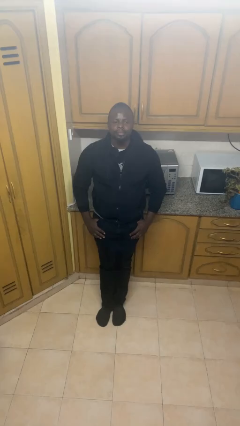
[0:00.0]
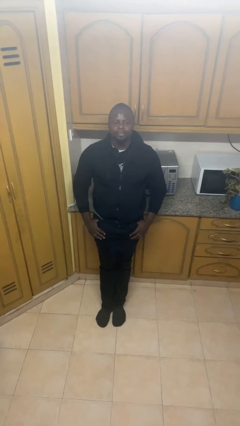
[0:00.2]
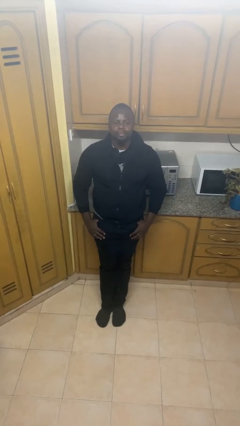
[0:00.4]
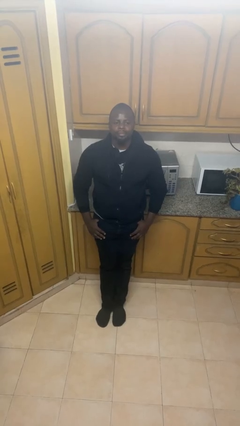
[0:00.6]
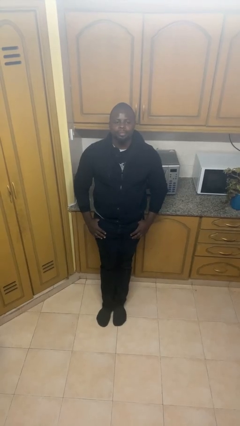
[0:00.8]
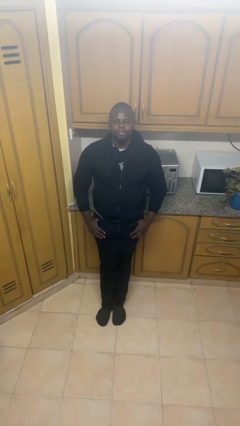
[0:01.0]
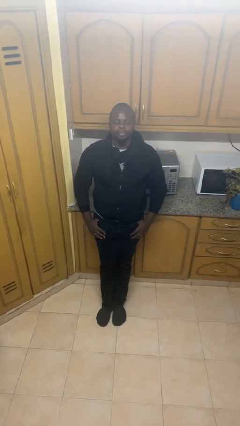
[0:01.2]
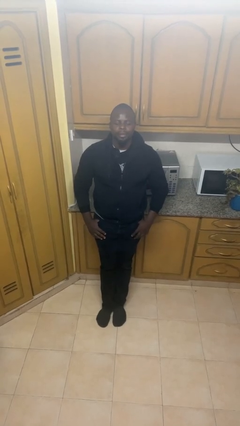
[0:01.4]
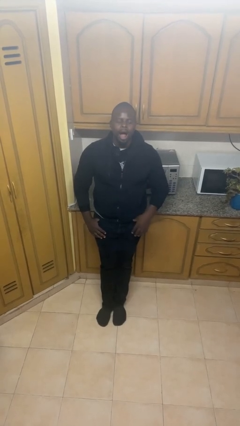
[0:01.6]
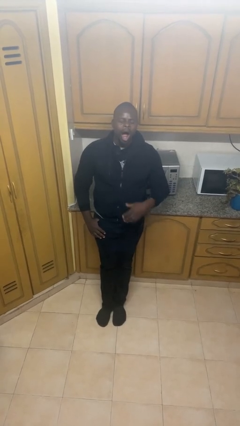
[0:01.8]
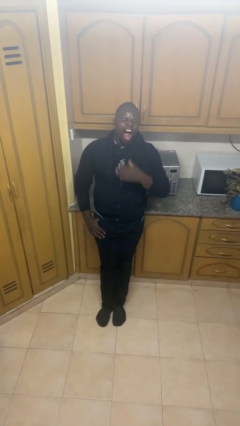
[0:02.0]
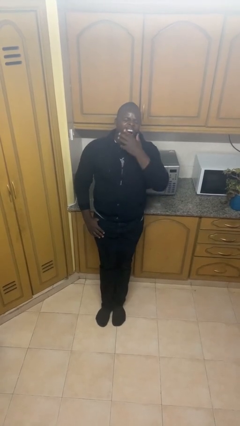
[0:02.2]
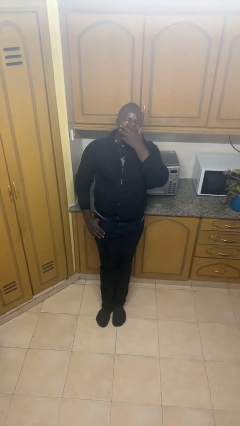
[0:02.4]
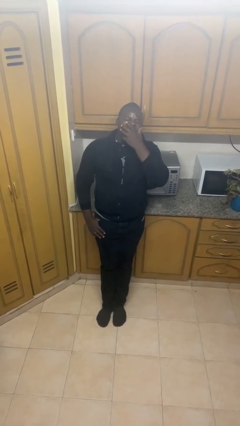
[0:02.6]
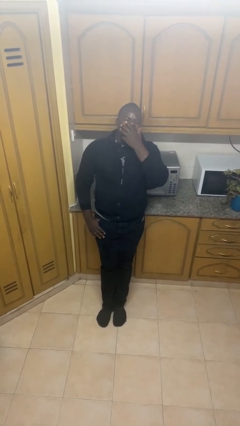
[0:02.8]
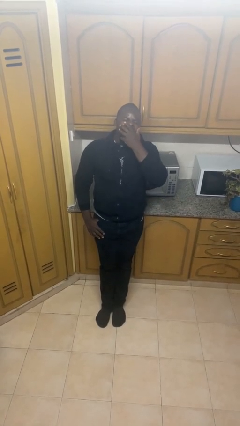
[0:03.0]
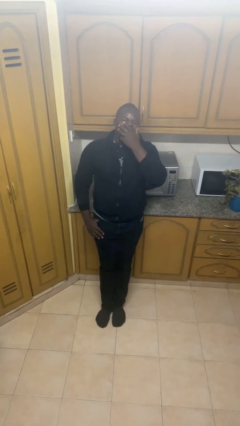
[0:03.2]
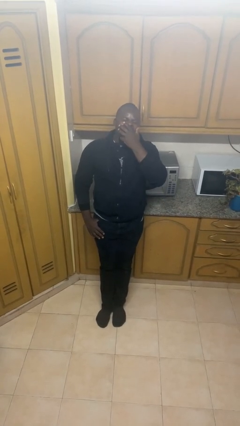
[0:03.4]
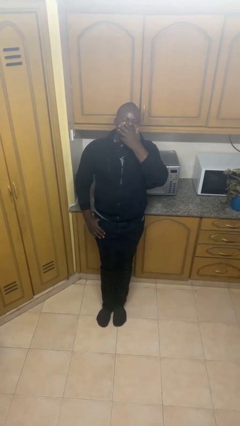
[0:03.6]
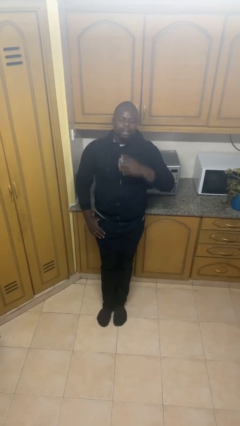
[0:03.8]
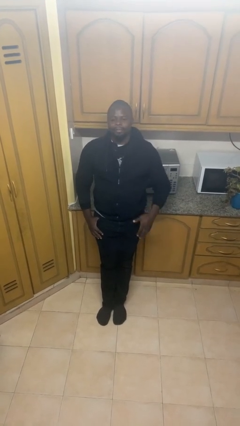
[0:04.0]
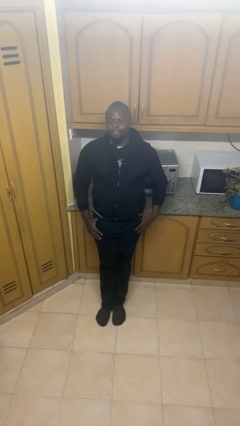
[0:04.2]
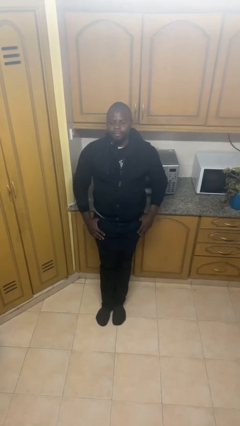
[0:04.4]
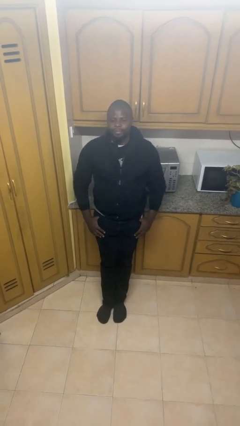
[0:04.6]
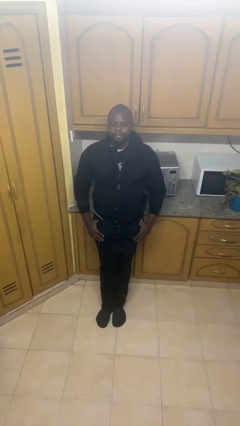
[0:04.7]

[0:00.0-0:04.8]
person yawns

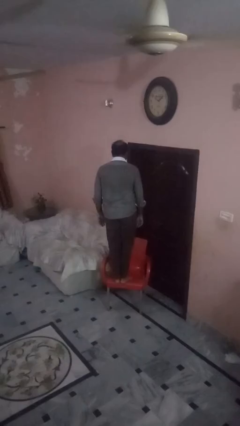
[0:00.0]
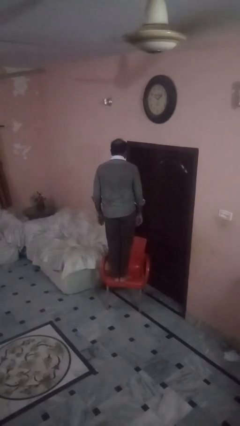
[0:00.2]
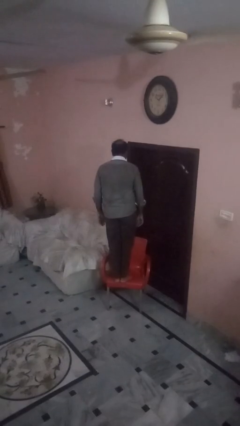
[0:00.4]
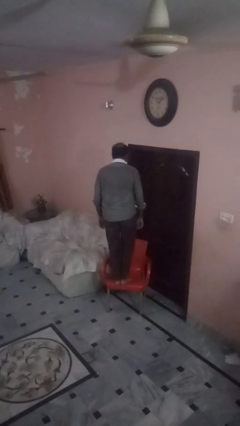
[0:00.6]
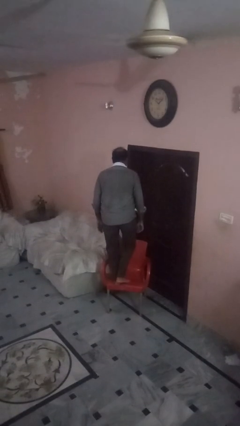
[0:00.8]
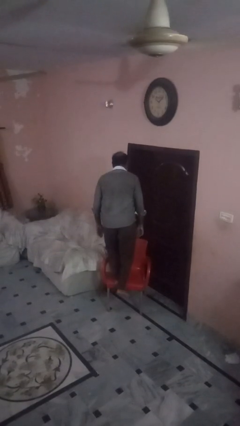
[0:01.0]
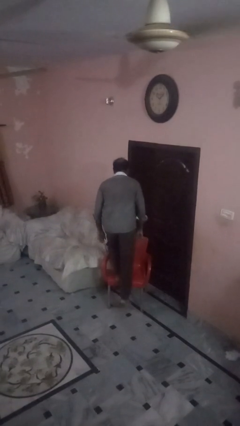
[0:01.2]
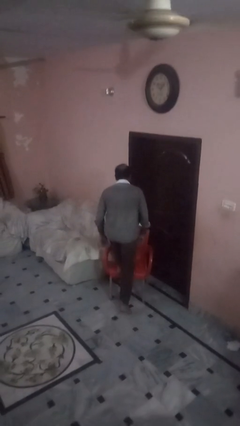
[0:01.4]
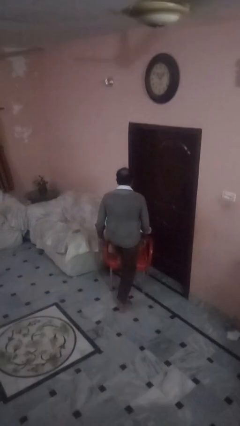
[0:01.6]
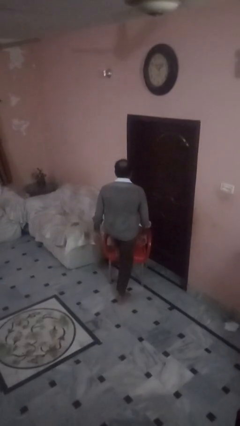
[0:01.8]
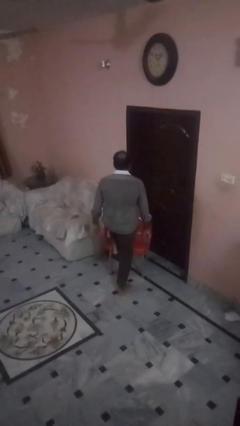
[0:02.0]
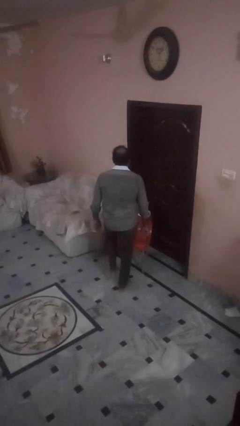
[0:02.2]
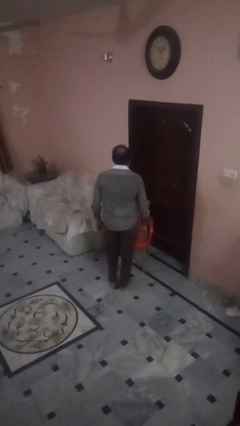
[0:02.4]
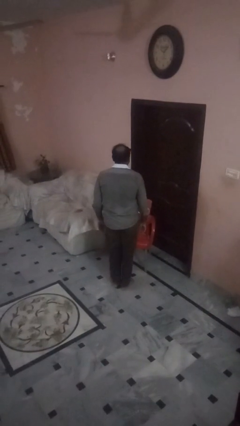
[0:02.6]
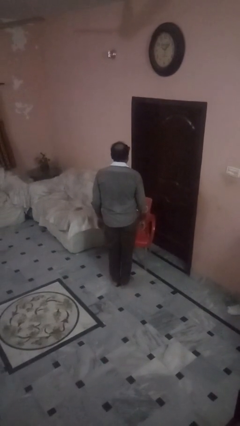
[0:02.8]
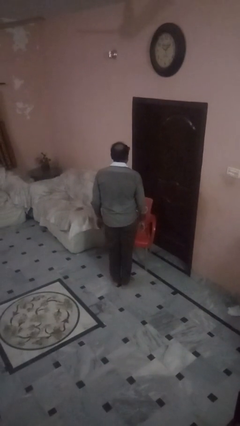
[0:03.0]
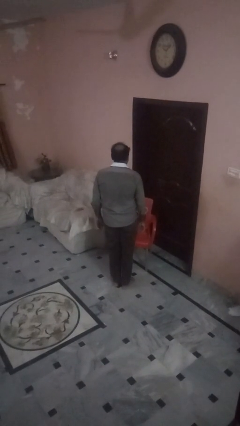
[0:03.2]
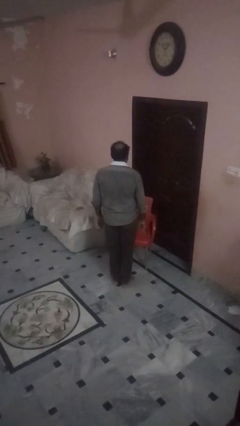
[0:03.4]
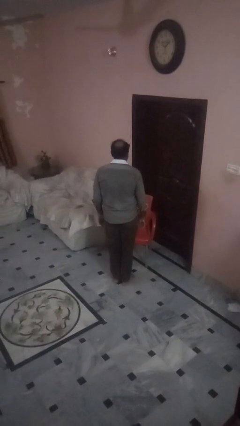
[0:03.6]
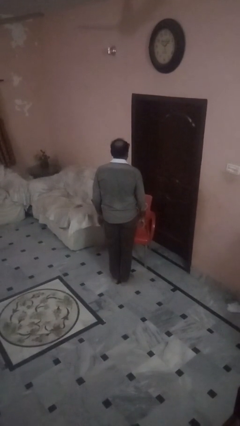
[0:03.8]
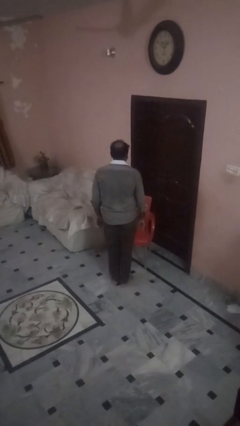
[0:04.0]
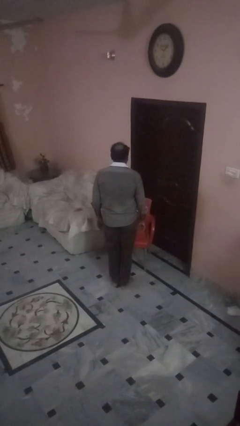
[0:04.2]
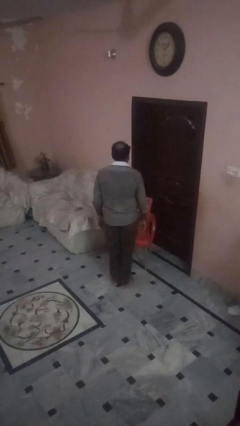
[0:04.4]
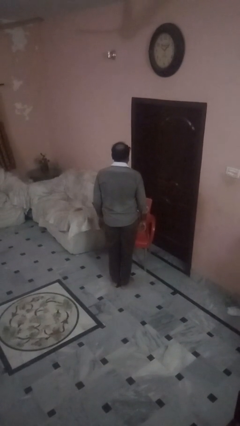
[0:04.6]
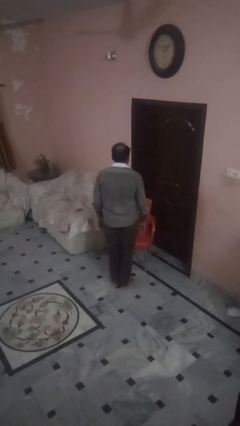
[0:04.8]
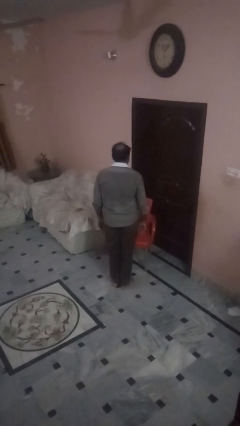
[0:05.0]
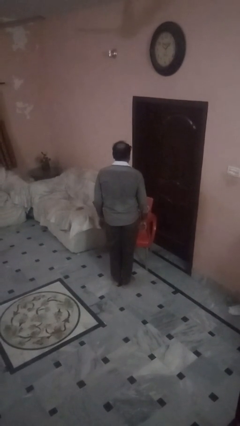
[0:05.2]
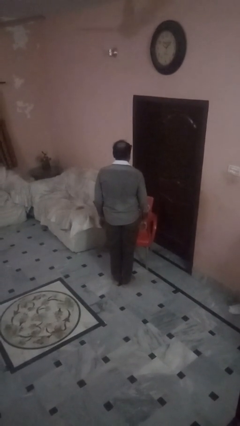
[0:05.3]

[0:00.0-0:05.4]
person climbs off chair

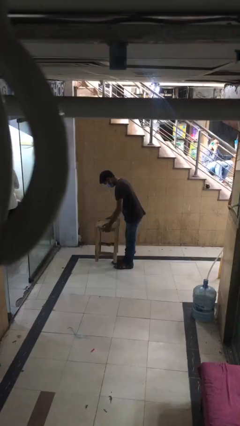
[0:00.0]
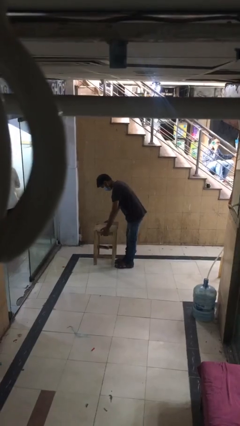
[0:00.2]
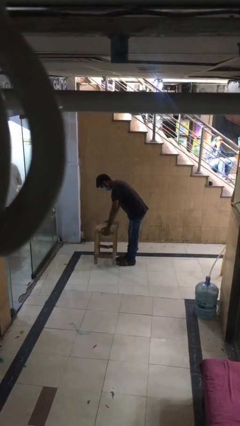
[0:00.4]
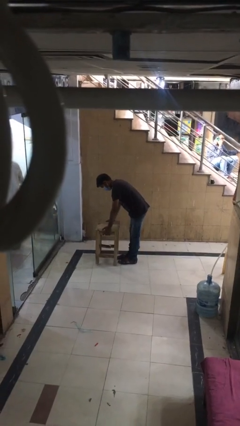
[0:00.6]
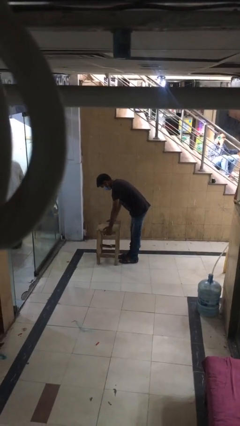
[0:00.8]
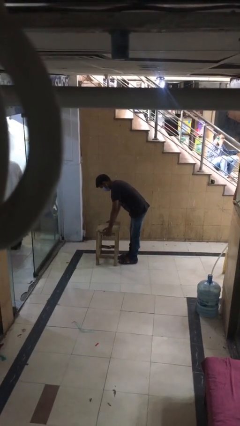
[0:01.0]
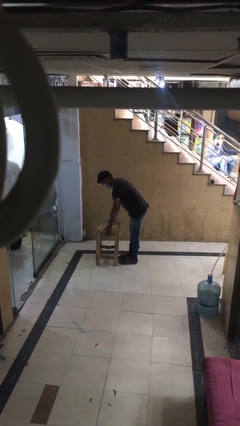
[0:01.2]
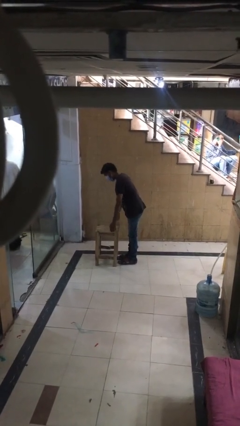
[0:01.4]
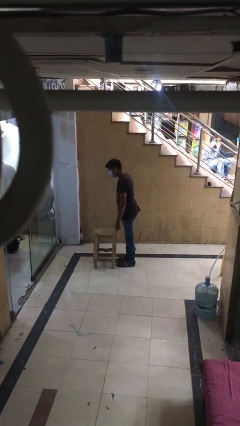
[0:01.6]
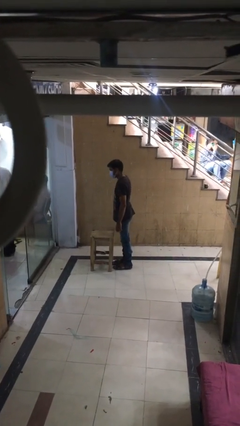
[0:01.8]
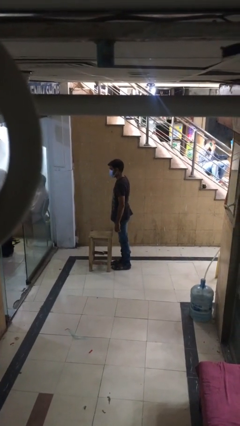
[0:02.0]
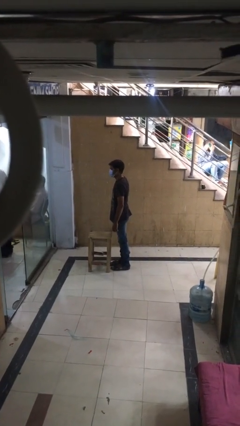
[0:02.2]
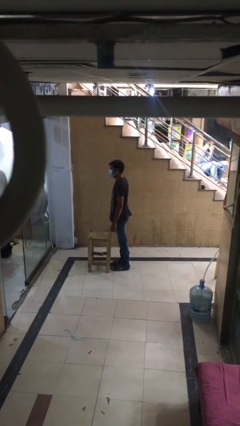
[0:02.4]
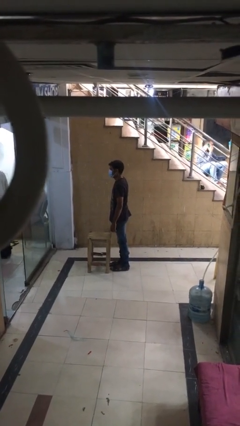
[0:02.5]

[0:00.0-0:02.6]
person puts down object on floor

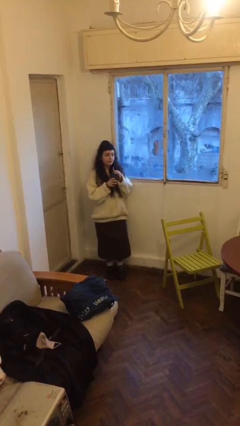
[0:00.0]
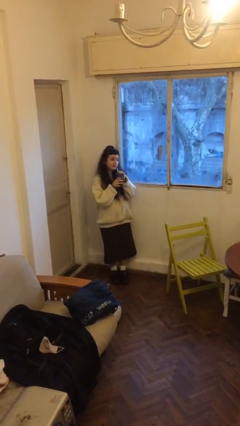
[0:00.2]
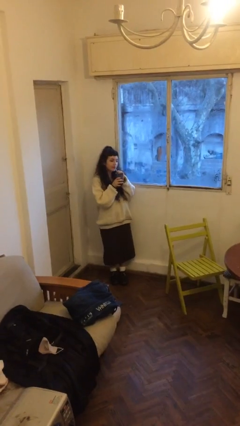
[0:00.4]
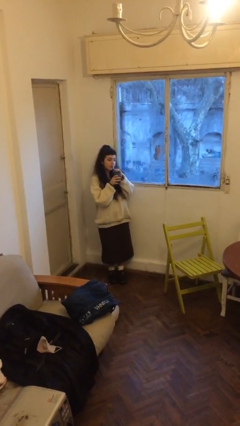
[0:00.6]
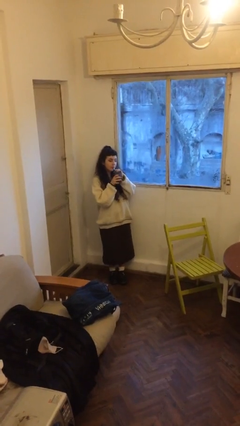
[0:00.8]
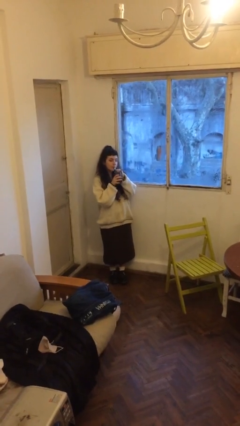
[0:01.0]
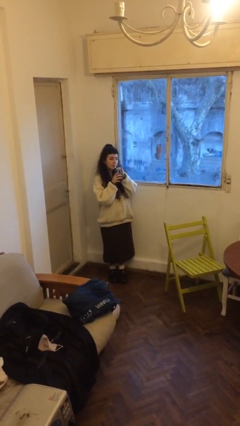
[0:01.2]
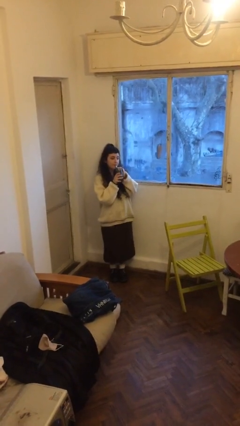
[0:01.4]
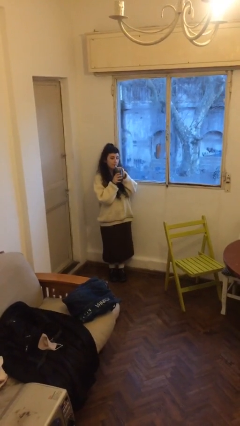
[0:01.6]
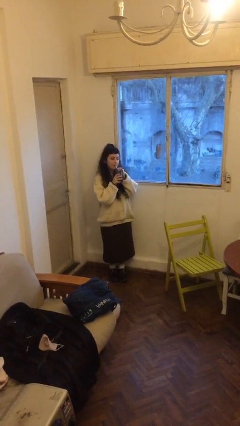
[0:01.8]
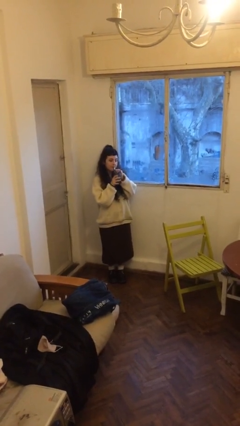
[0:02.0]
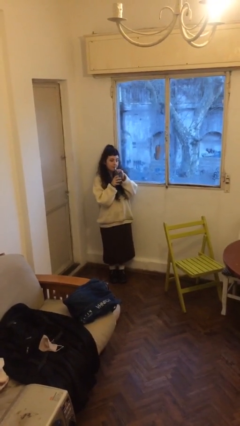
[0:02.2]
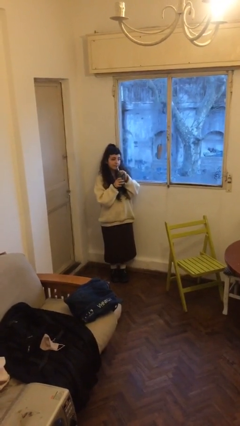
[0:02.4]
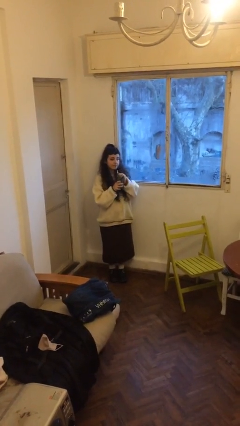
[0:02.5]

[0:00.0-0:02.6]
person drinks from straw

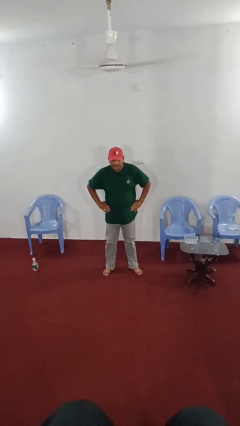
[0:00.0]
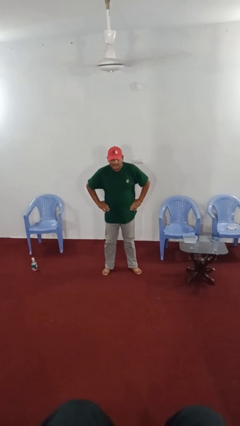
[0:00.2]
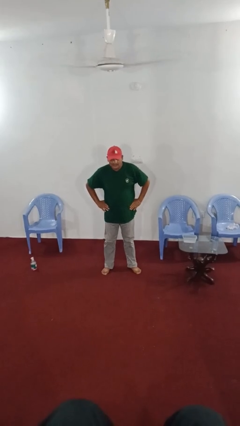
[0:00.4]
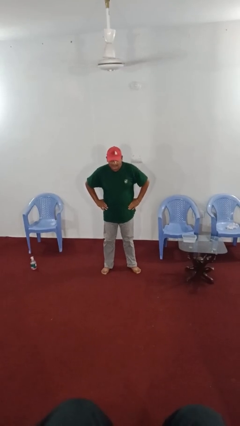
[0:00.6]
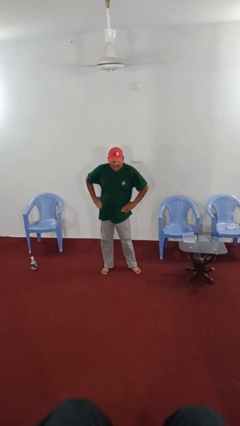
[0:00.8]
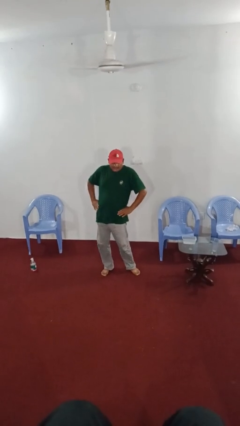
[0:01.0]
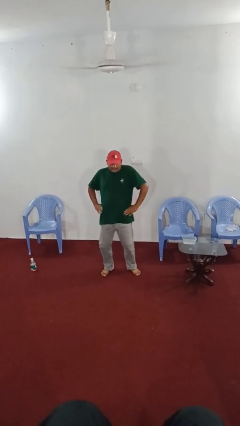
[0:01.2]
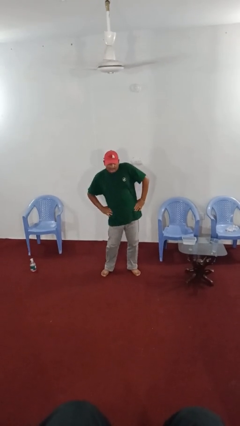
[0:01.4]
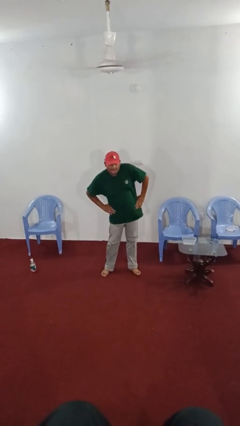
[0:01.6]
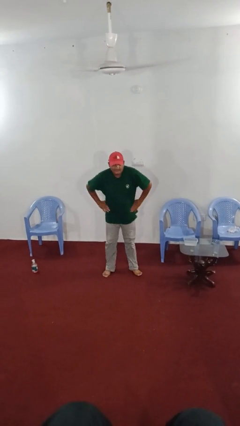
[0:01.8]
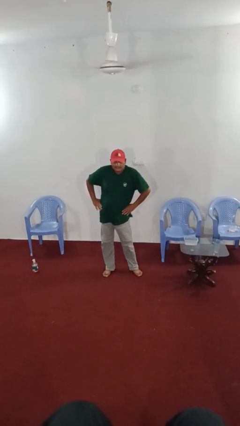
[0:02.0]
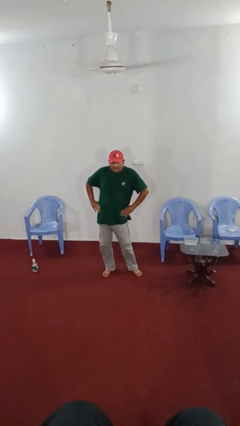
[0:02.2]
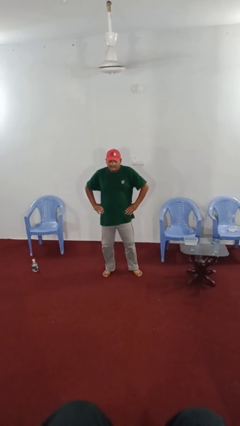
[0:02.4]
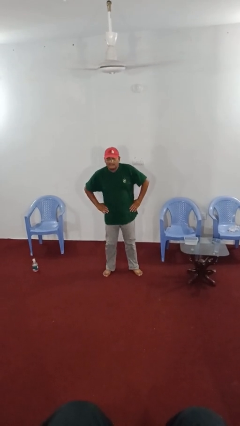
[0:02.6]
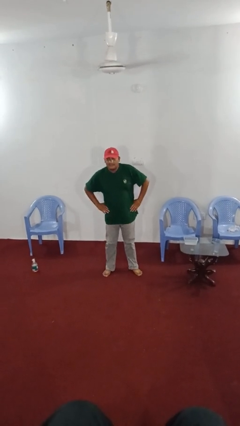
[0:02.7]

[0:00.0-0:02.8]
person wiggles hips
